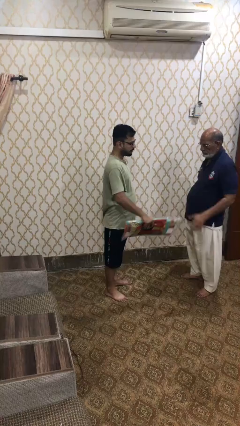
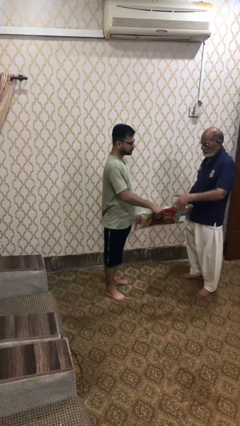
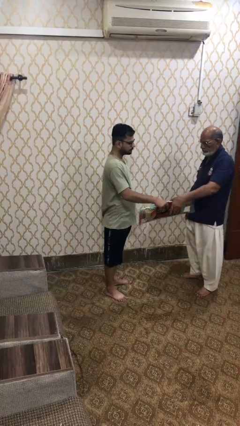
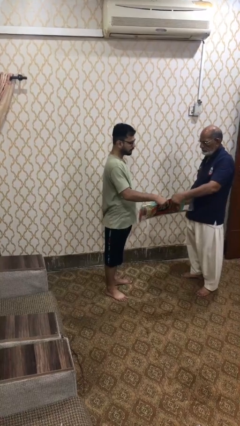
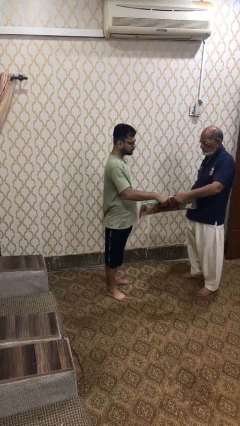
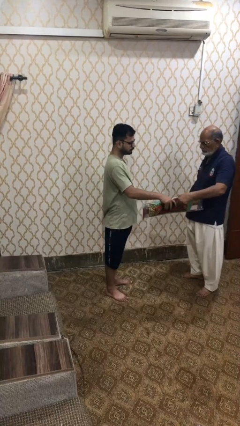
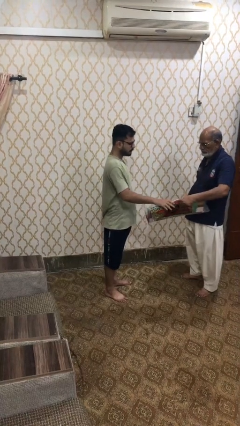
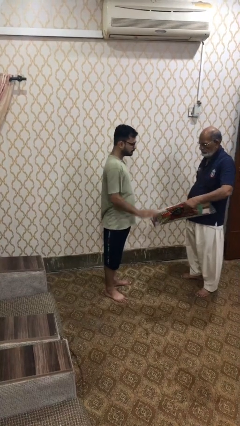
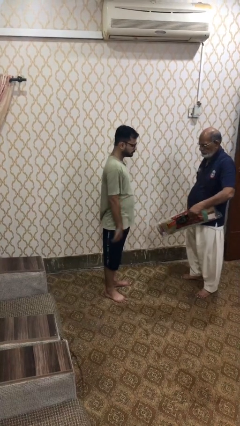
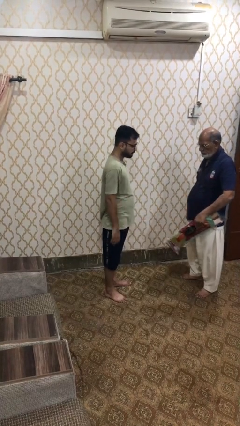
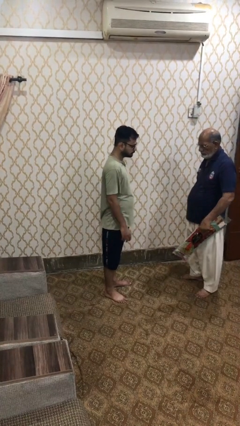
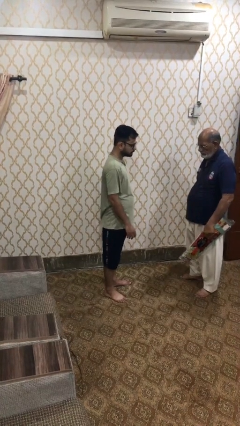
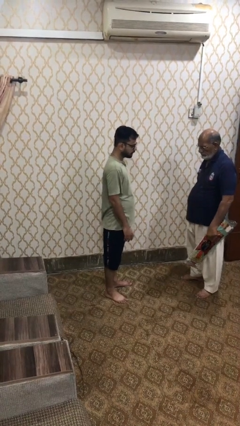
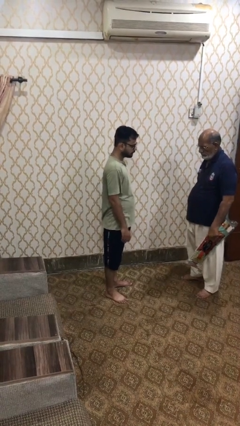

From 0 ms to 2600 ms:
person transfers object to person

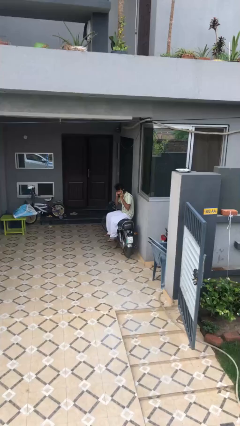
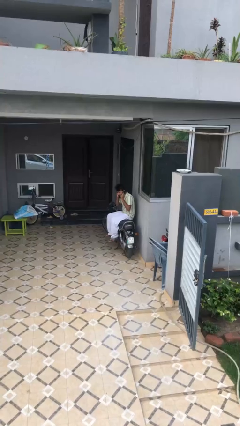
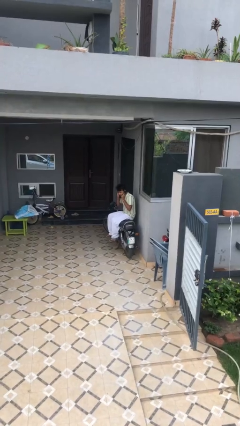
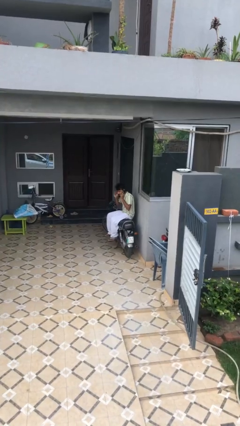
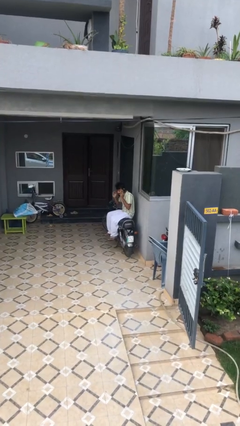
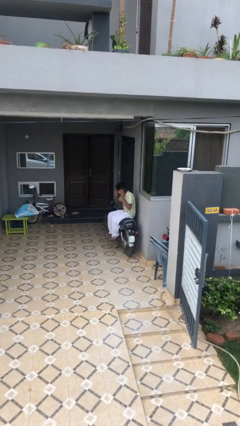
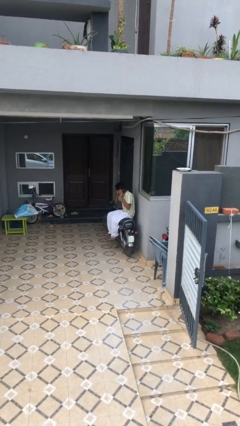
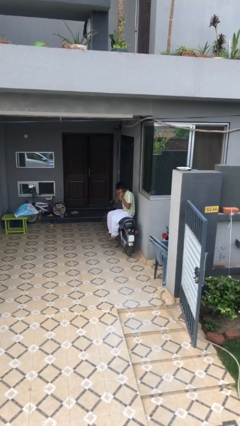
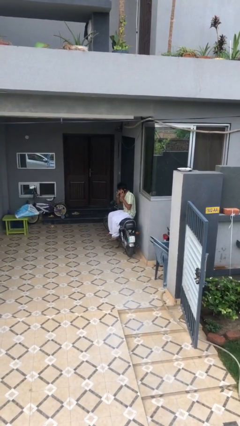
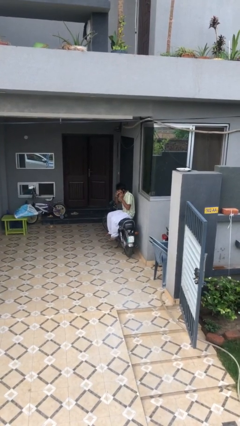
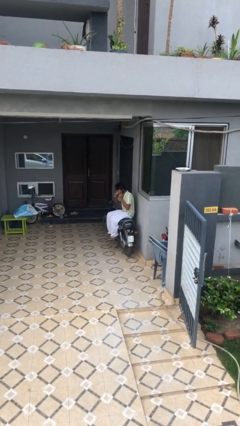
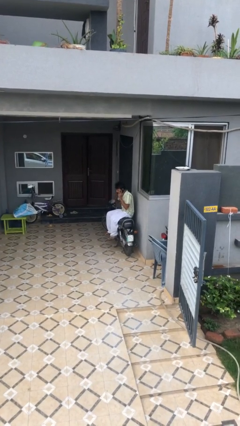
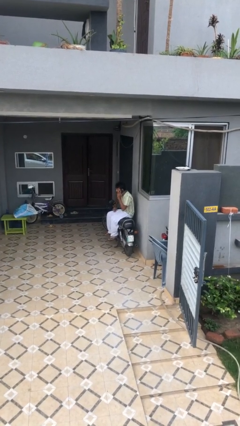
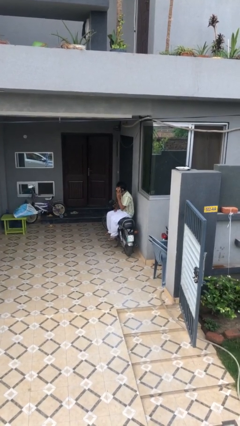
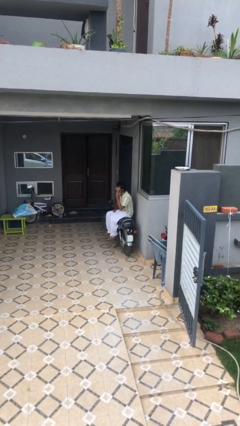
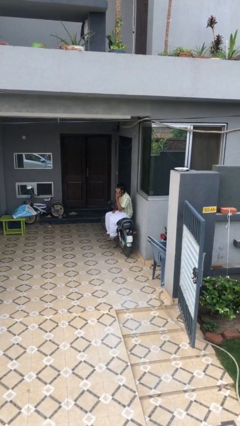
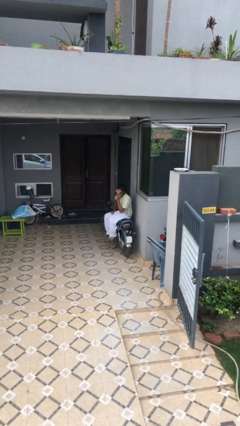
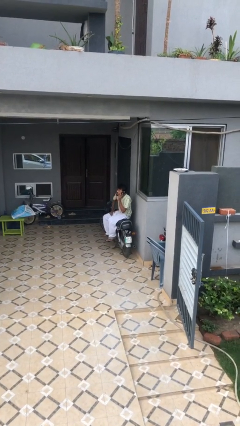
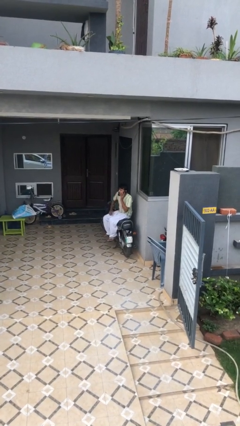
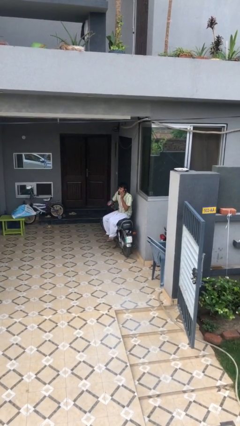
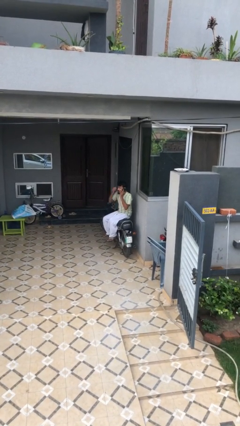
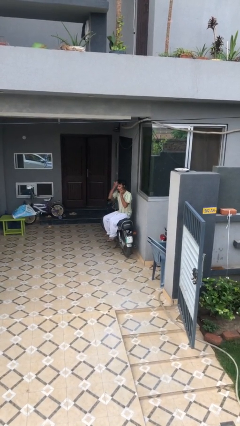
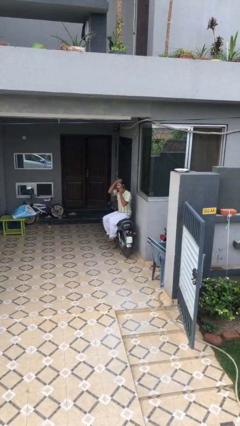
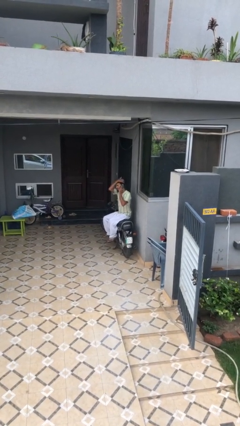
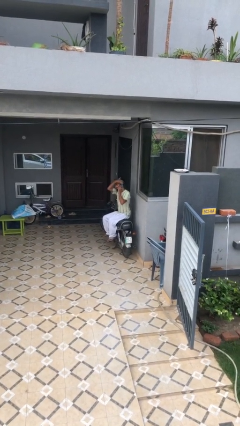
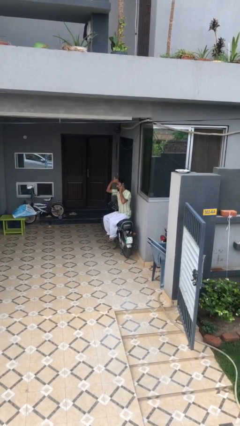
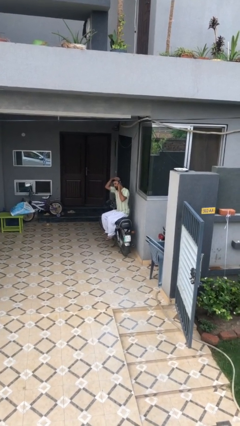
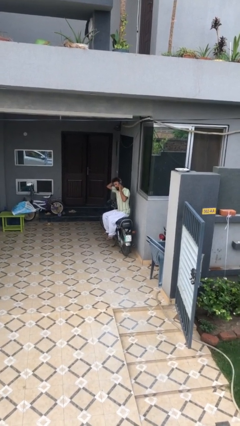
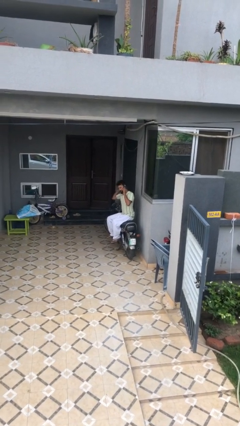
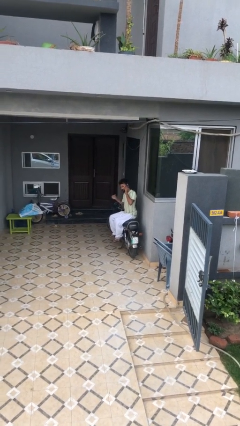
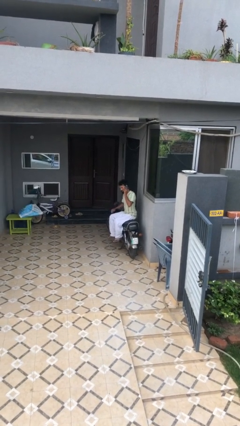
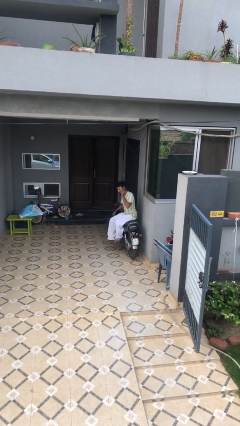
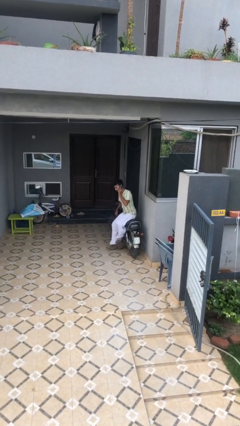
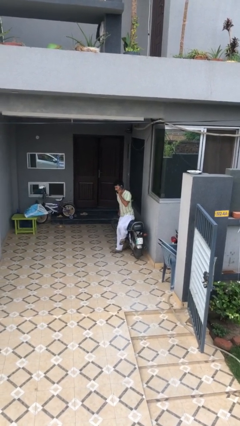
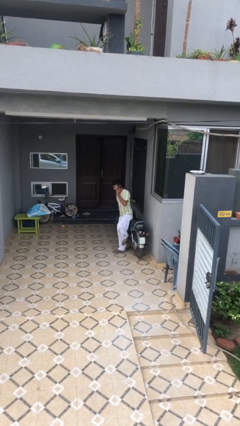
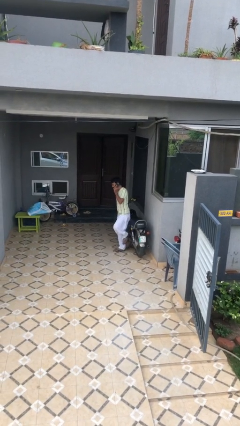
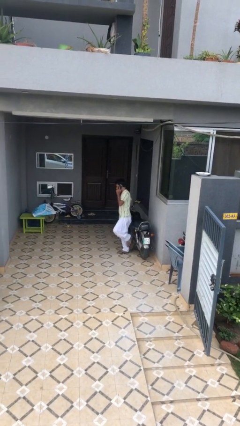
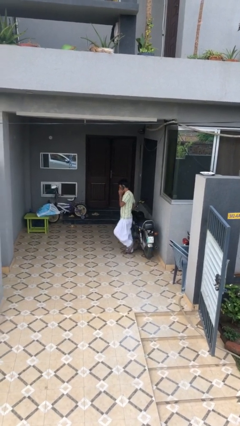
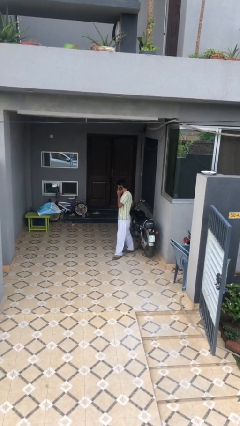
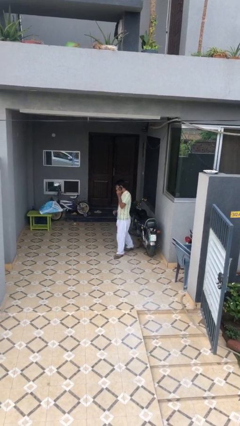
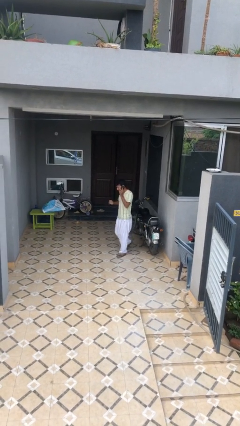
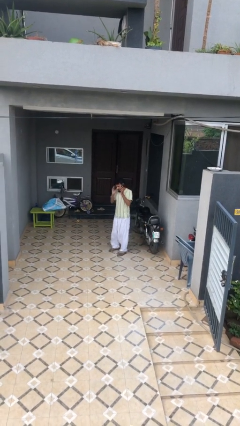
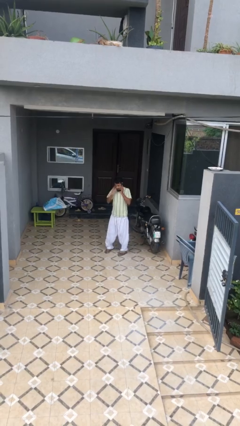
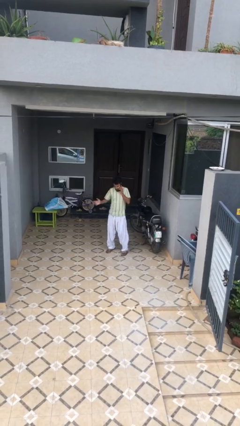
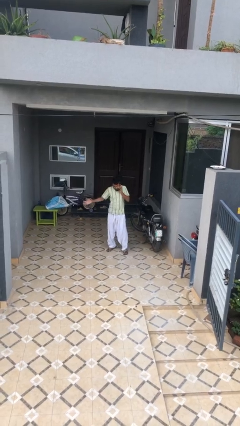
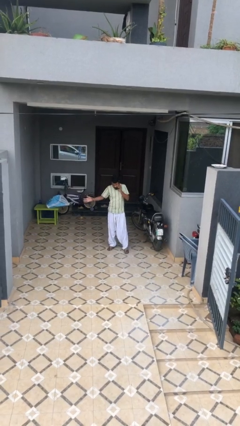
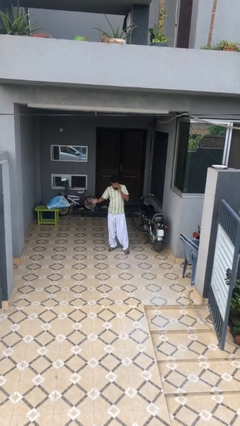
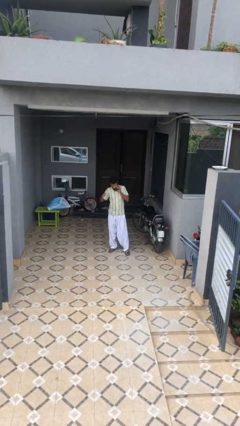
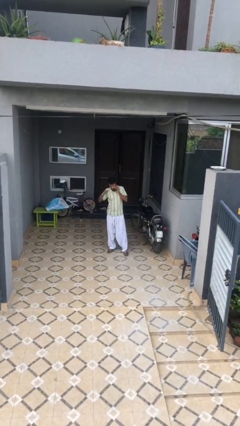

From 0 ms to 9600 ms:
person talks on phone

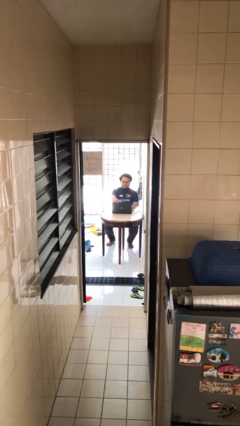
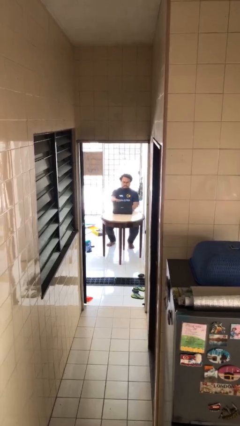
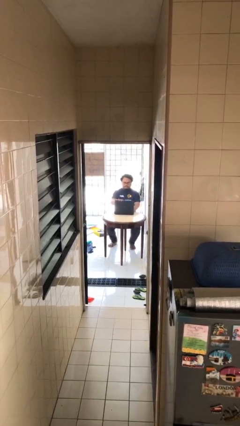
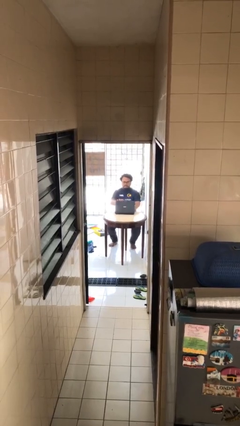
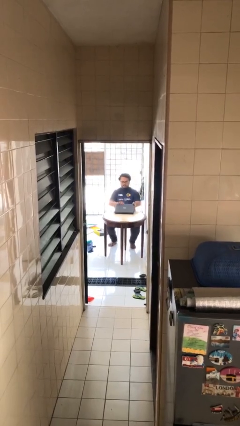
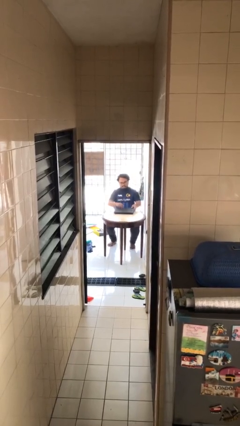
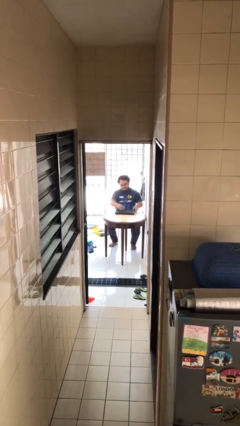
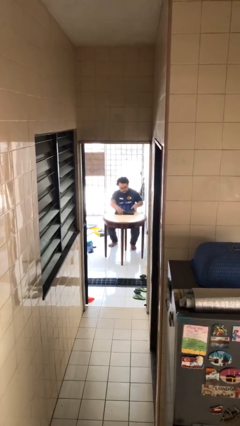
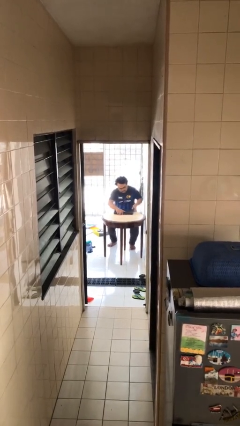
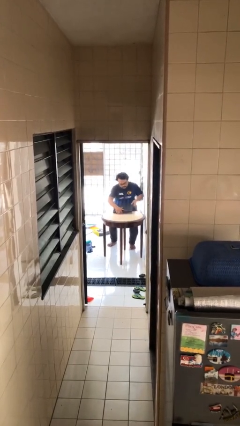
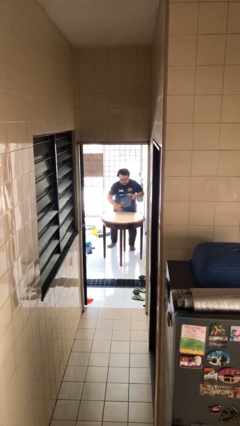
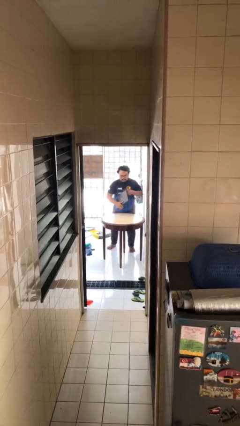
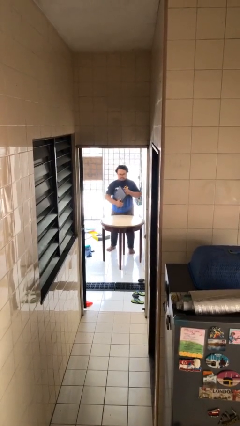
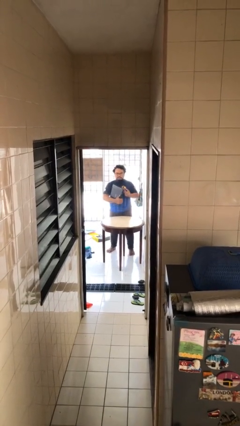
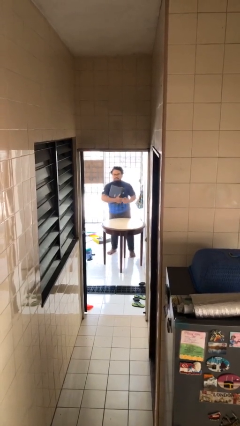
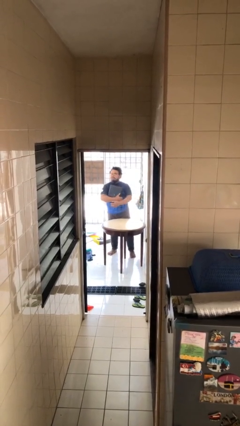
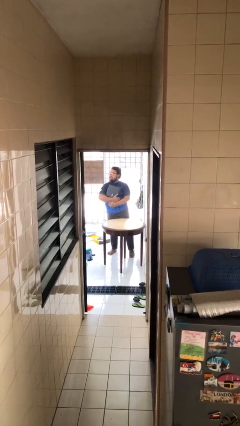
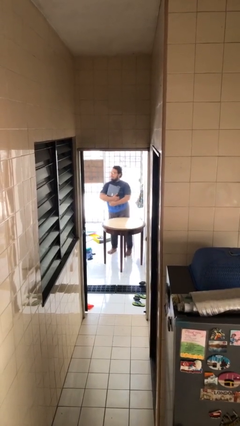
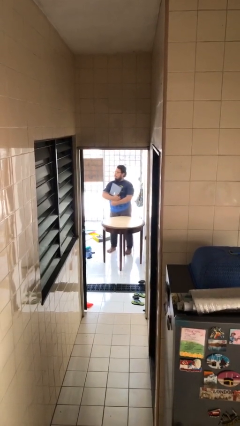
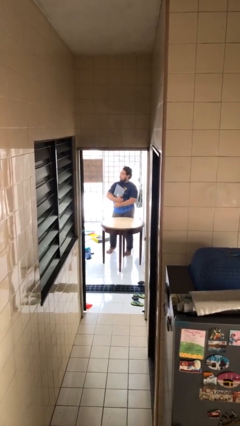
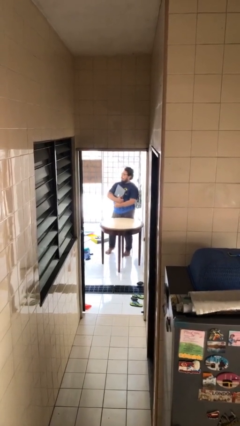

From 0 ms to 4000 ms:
person stands up

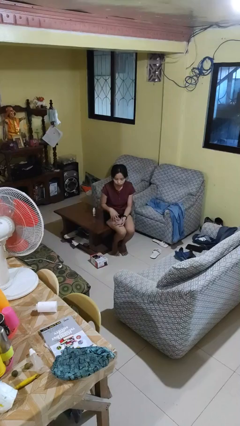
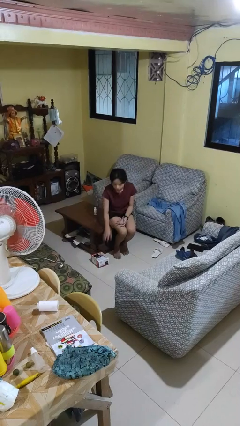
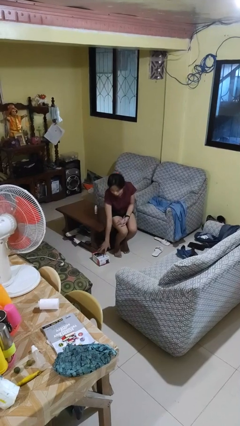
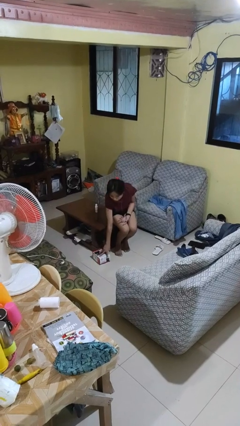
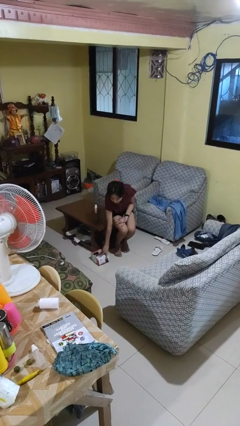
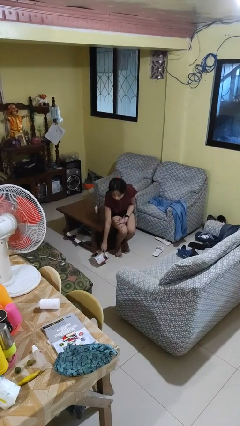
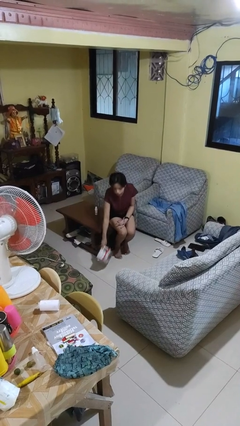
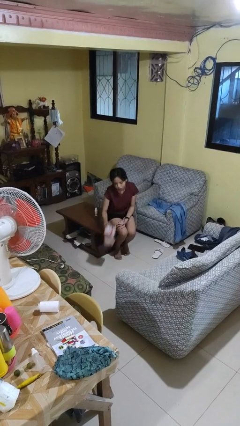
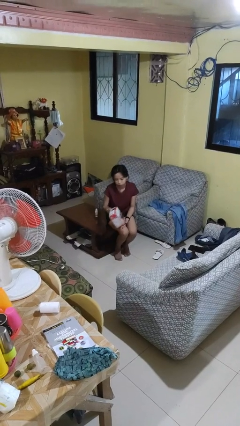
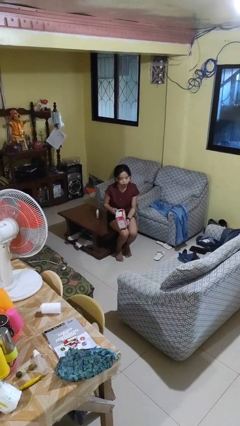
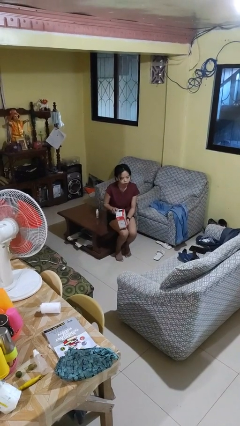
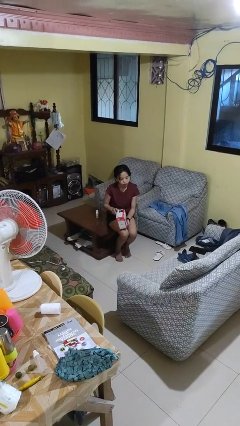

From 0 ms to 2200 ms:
person picks up object from floor
